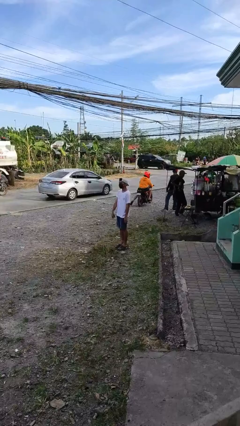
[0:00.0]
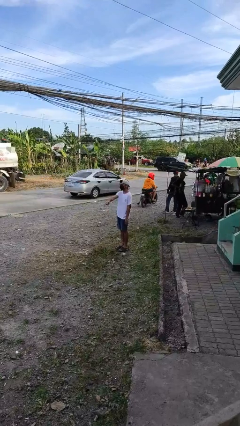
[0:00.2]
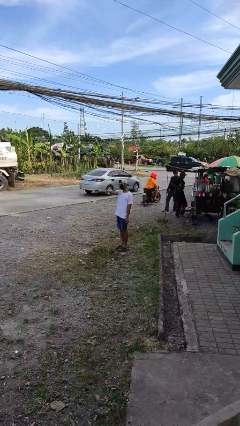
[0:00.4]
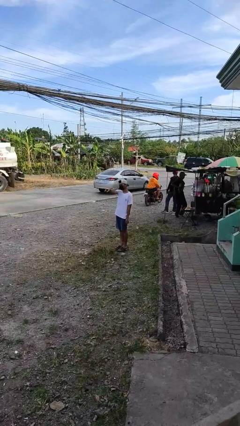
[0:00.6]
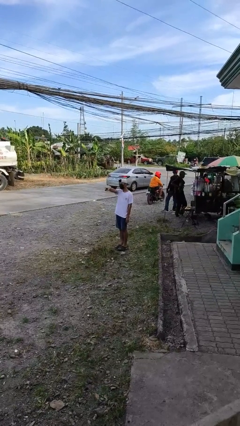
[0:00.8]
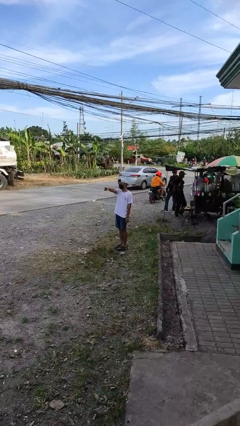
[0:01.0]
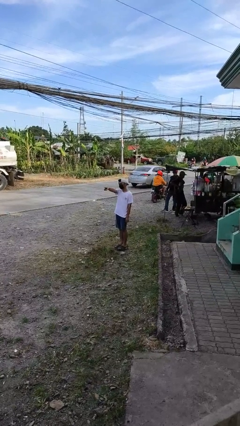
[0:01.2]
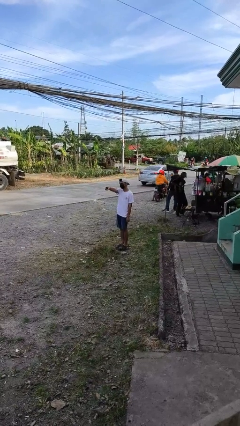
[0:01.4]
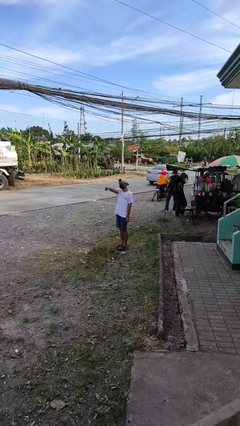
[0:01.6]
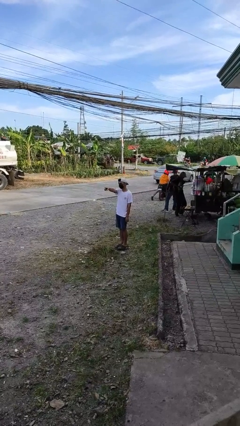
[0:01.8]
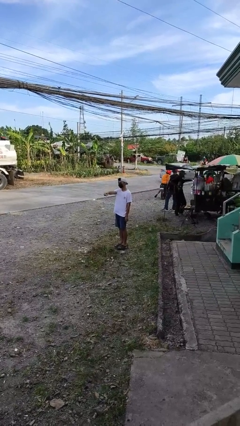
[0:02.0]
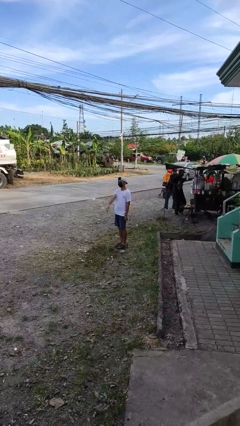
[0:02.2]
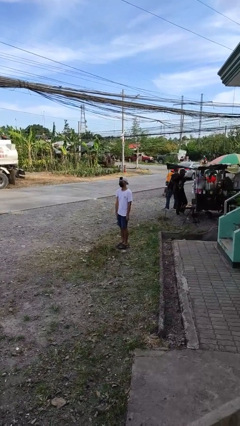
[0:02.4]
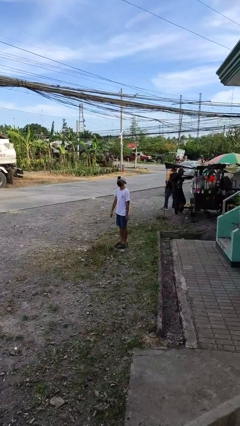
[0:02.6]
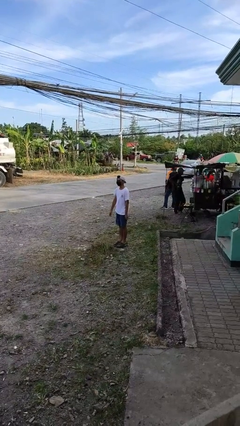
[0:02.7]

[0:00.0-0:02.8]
person points at person

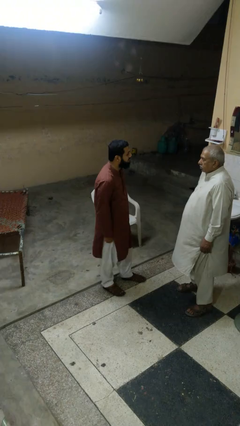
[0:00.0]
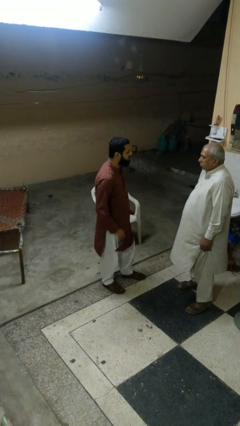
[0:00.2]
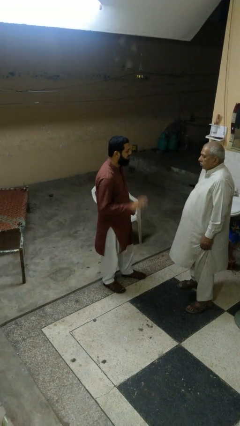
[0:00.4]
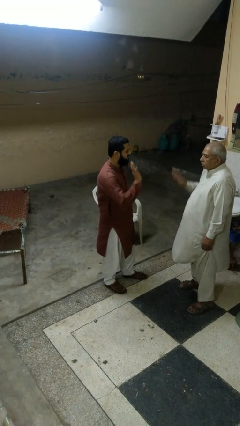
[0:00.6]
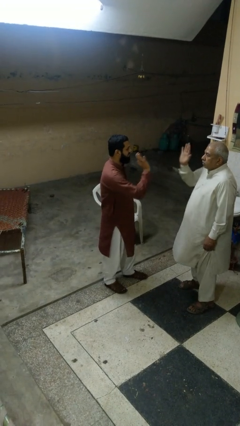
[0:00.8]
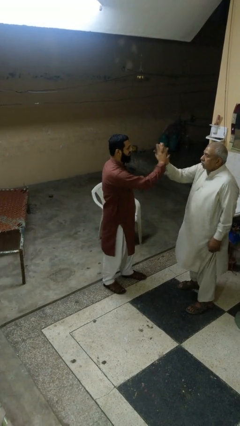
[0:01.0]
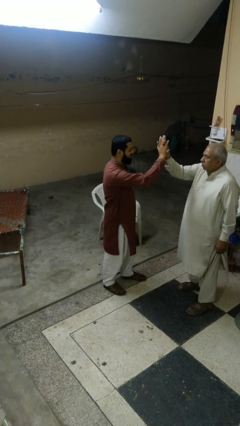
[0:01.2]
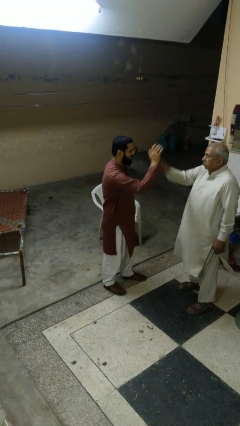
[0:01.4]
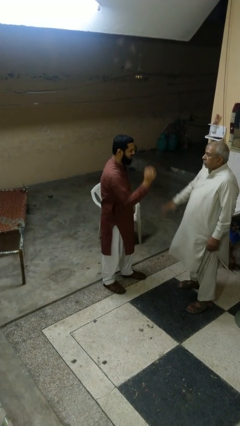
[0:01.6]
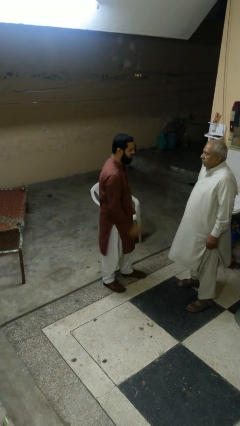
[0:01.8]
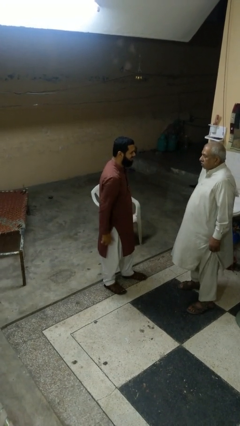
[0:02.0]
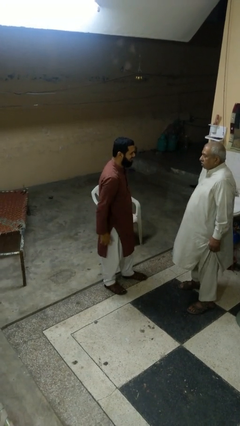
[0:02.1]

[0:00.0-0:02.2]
person highfives hand

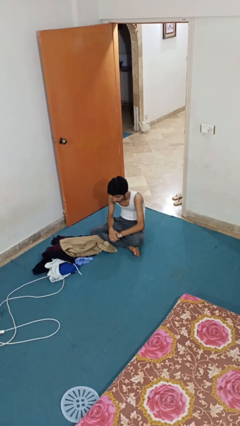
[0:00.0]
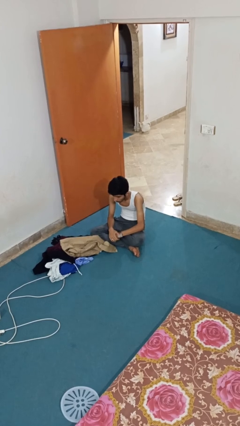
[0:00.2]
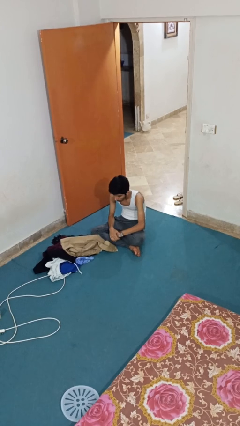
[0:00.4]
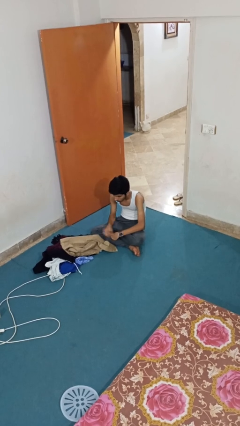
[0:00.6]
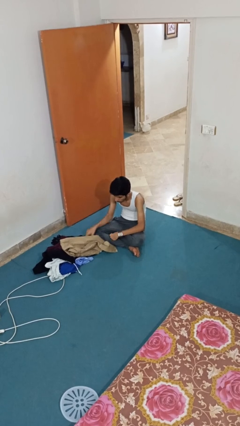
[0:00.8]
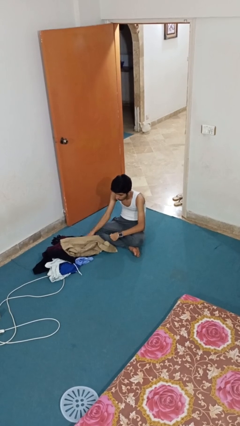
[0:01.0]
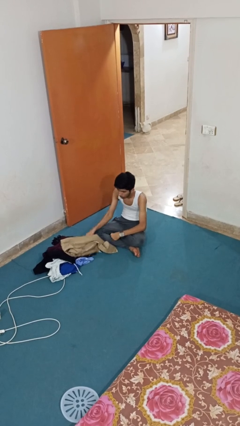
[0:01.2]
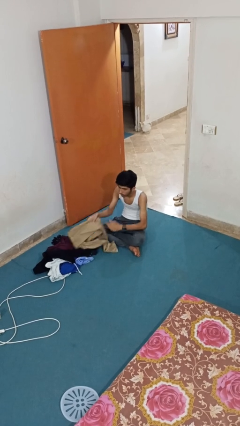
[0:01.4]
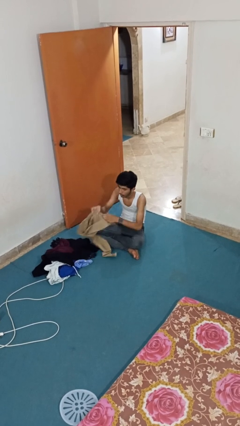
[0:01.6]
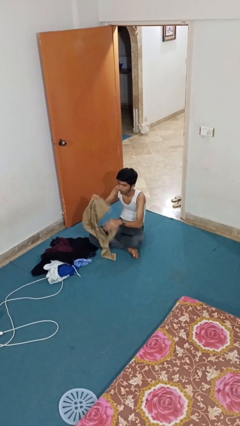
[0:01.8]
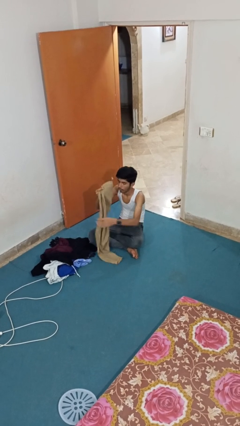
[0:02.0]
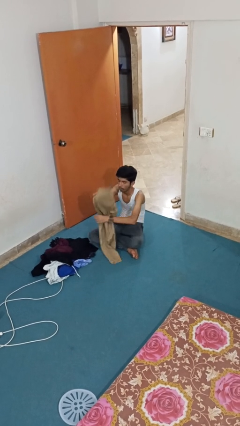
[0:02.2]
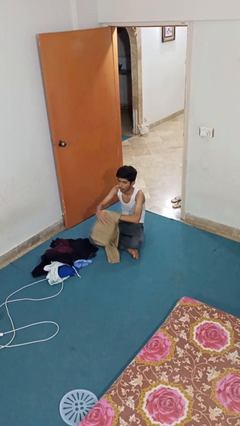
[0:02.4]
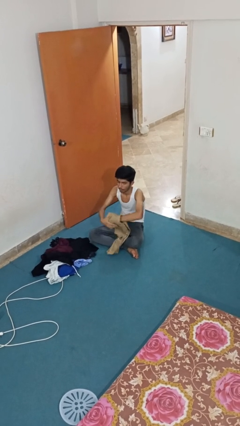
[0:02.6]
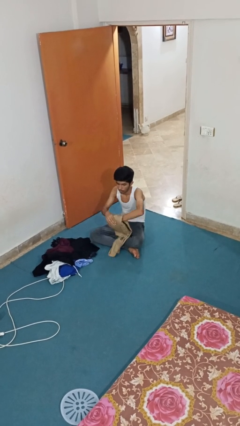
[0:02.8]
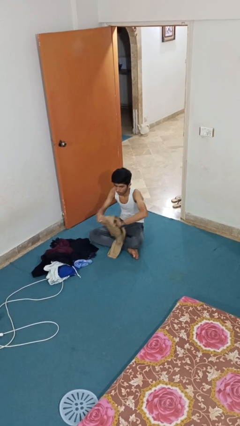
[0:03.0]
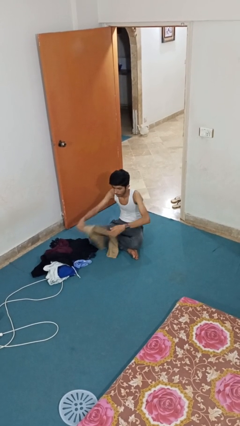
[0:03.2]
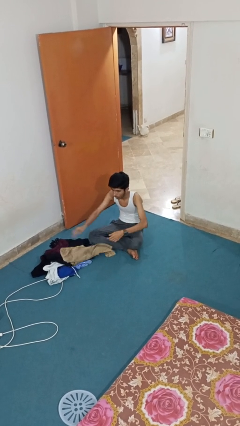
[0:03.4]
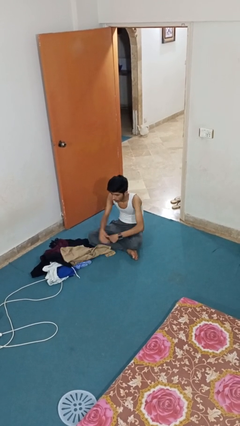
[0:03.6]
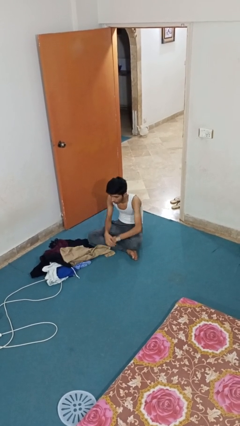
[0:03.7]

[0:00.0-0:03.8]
person folds pants

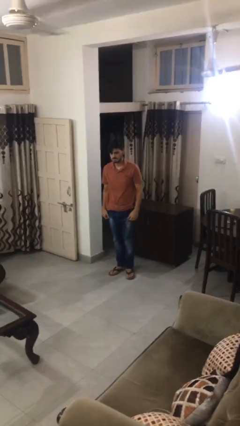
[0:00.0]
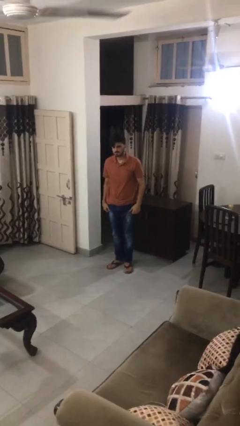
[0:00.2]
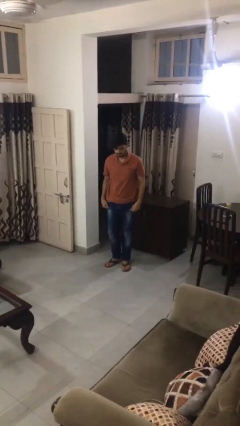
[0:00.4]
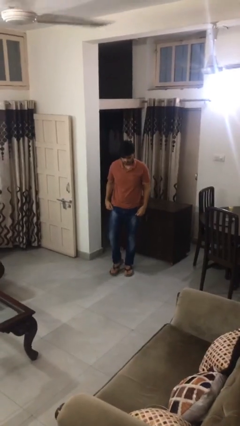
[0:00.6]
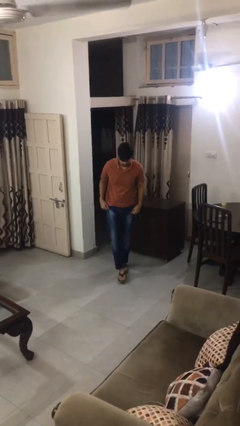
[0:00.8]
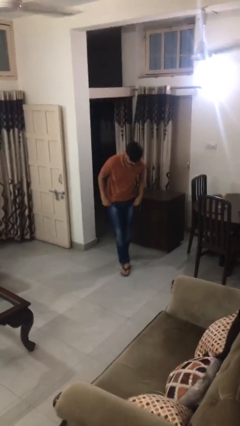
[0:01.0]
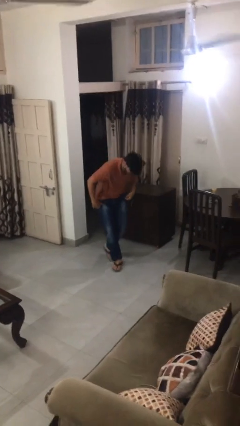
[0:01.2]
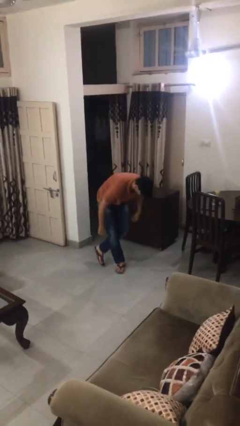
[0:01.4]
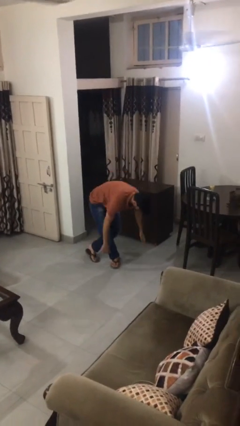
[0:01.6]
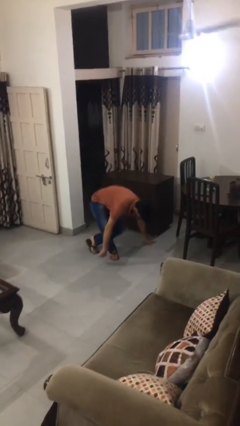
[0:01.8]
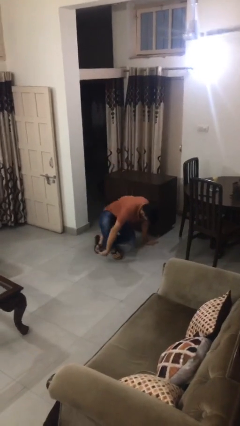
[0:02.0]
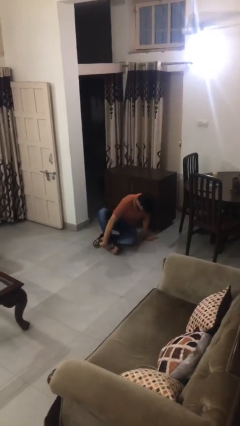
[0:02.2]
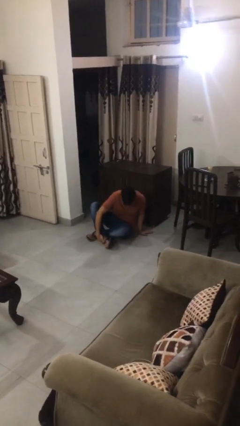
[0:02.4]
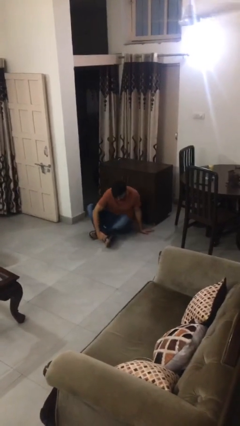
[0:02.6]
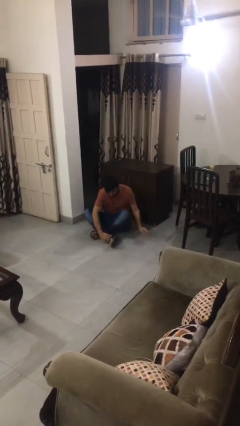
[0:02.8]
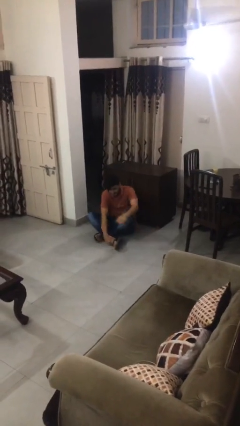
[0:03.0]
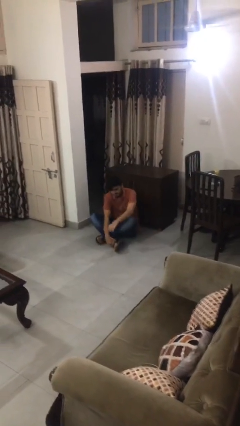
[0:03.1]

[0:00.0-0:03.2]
person sits crisscross

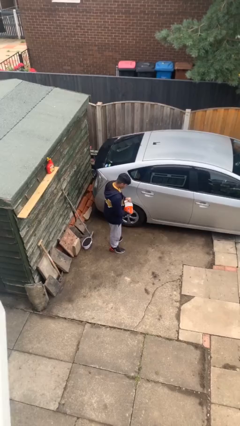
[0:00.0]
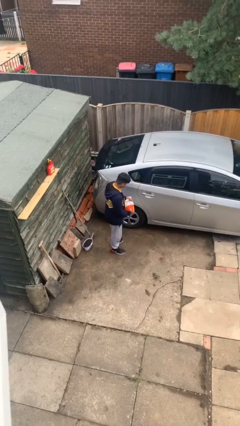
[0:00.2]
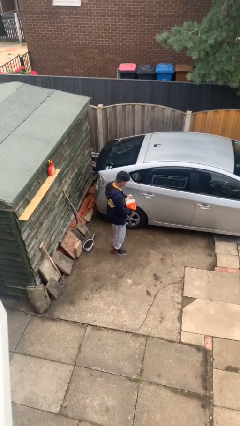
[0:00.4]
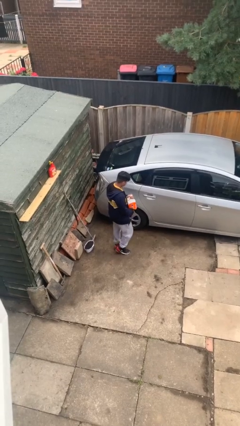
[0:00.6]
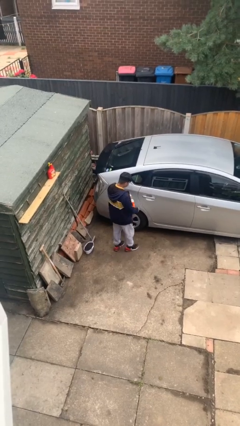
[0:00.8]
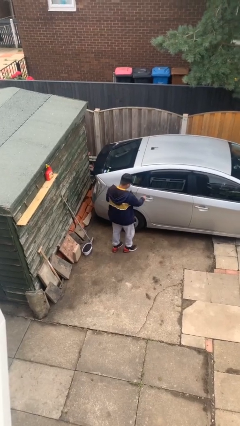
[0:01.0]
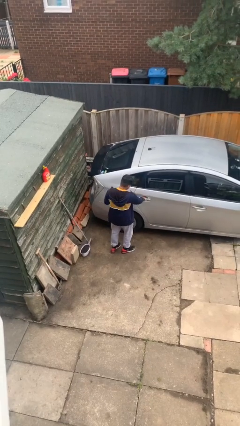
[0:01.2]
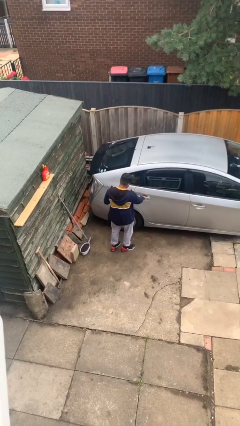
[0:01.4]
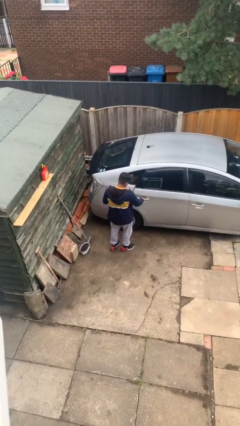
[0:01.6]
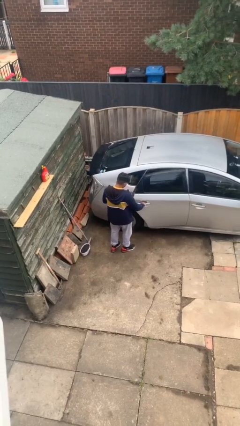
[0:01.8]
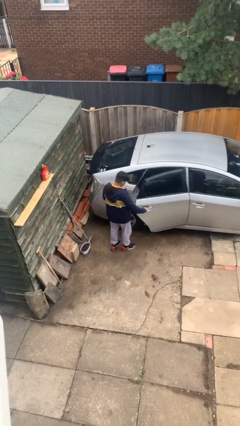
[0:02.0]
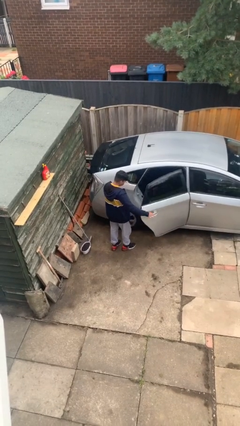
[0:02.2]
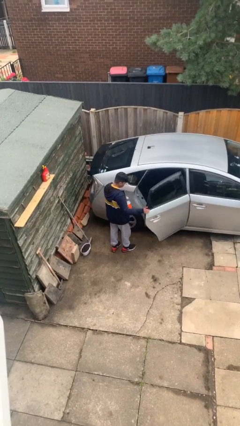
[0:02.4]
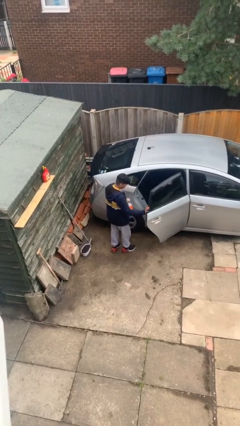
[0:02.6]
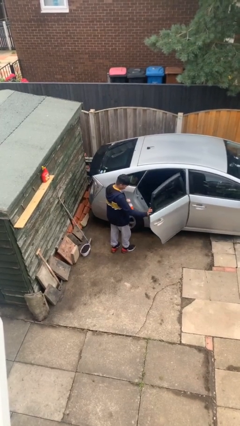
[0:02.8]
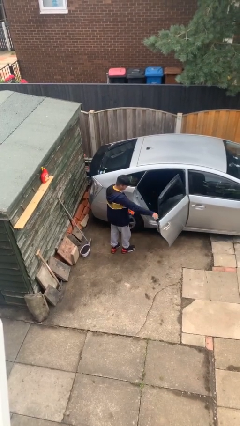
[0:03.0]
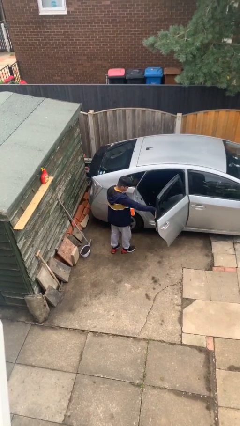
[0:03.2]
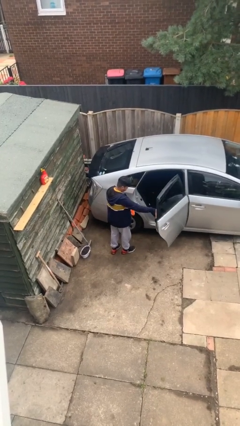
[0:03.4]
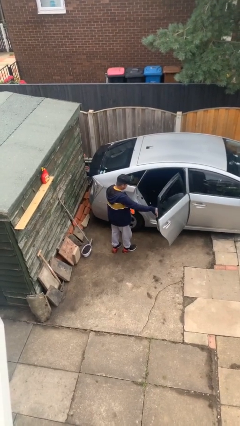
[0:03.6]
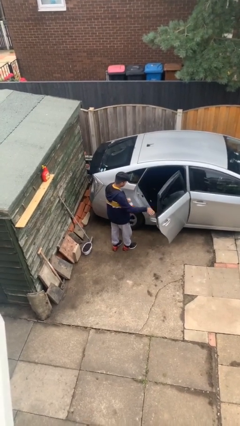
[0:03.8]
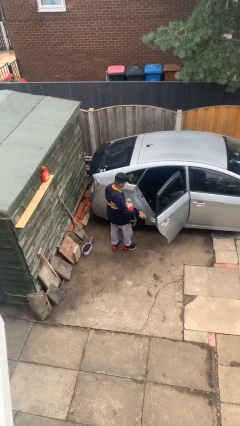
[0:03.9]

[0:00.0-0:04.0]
person opens car door

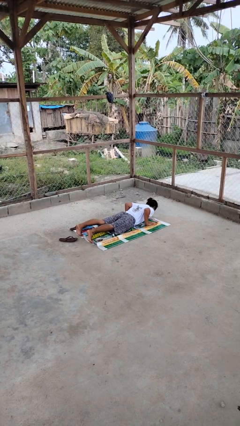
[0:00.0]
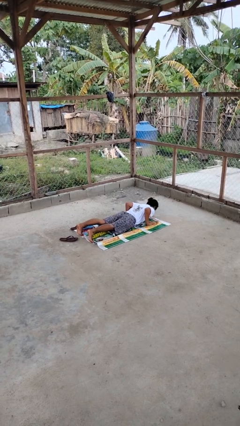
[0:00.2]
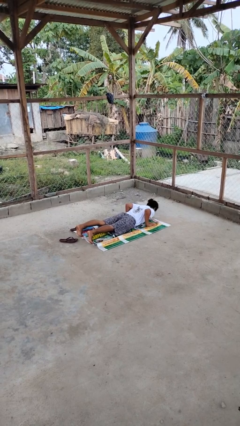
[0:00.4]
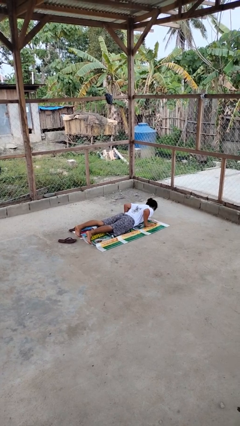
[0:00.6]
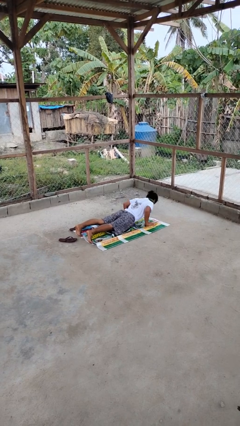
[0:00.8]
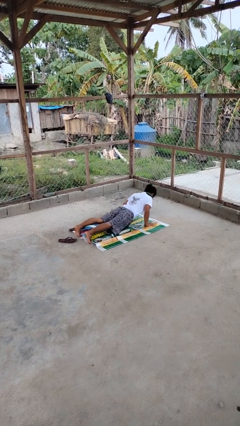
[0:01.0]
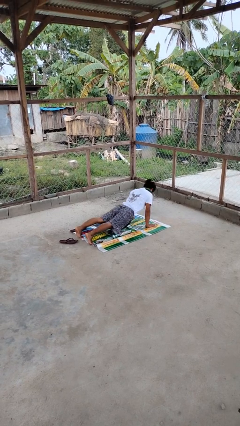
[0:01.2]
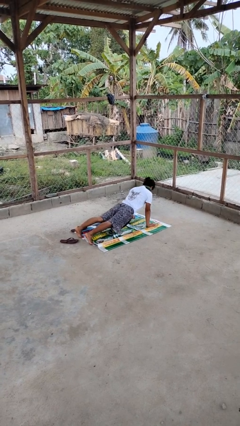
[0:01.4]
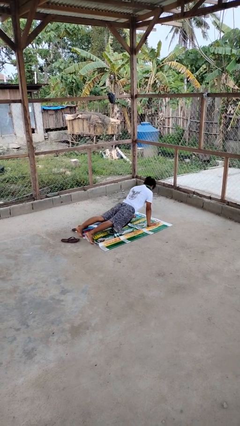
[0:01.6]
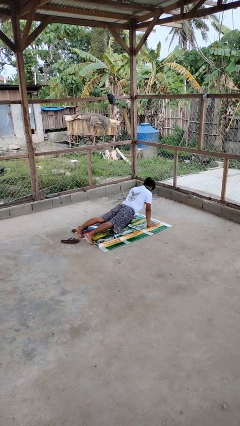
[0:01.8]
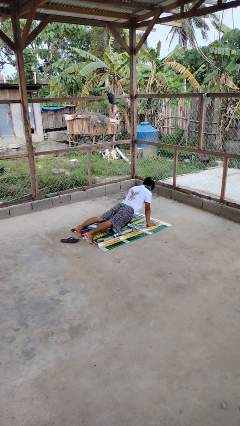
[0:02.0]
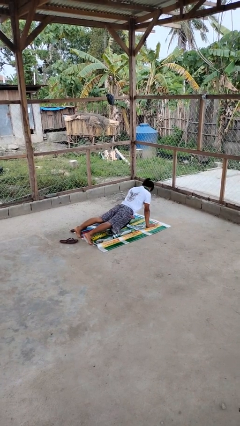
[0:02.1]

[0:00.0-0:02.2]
person exercises with pushup
